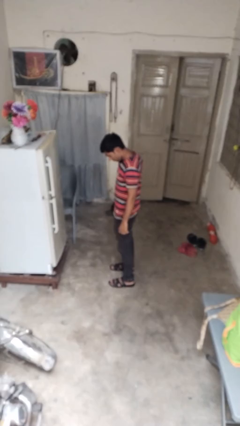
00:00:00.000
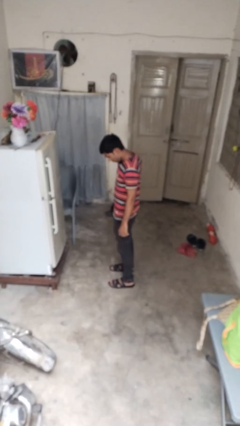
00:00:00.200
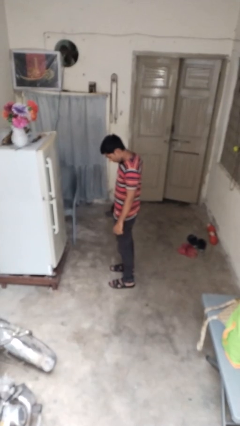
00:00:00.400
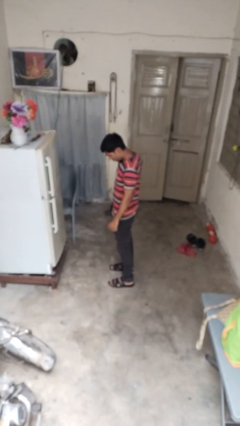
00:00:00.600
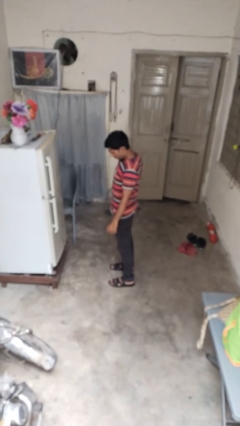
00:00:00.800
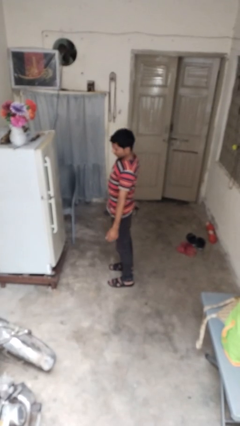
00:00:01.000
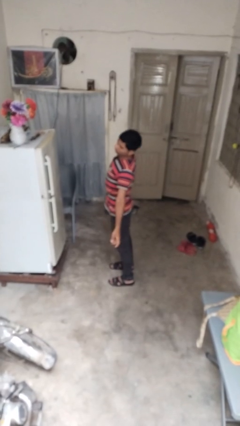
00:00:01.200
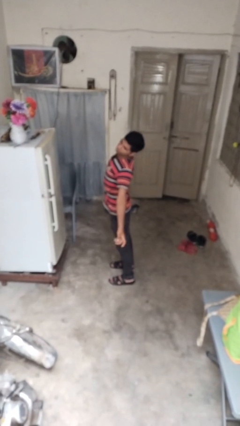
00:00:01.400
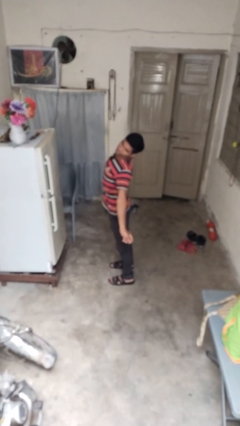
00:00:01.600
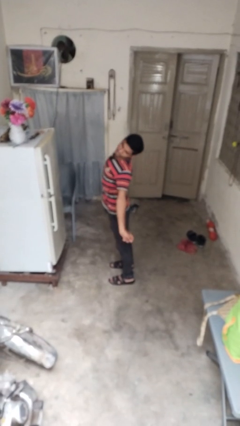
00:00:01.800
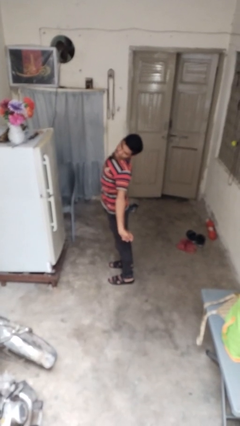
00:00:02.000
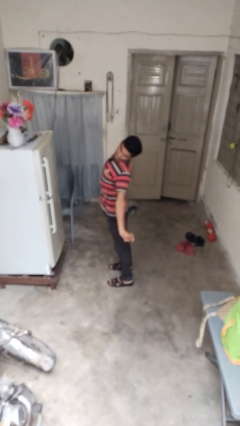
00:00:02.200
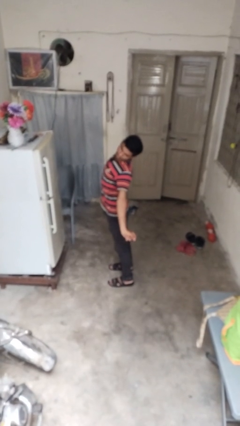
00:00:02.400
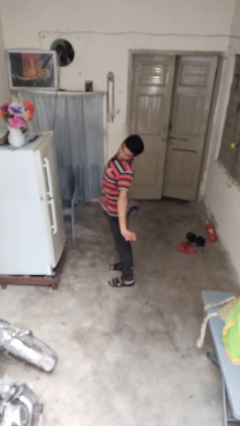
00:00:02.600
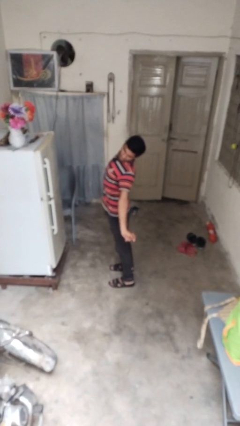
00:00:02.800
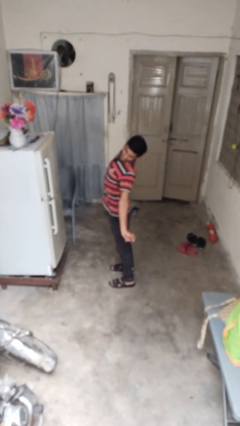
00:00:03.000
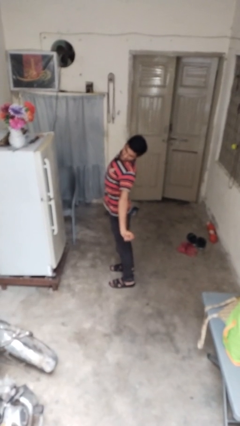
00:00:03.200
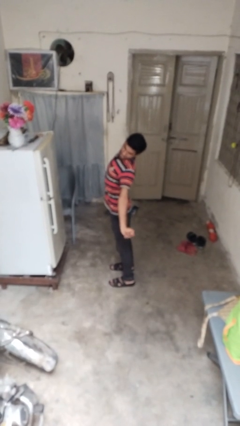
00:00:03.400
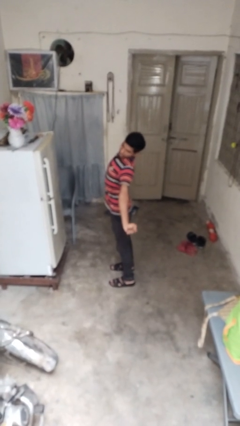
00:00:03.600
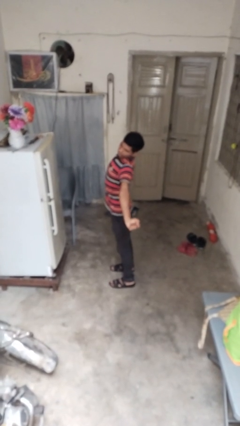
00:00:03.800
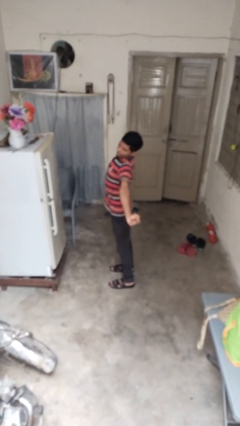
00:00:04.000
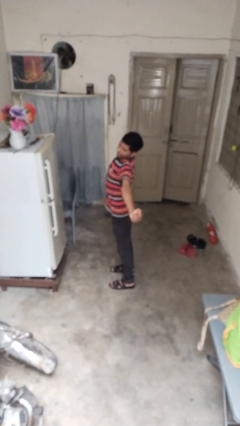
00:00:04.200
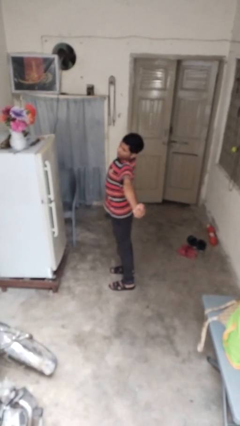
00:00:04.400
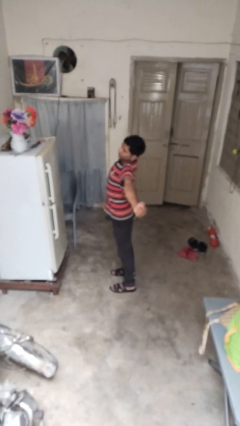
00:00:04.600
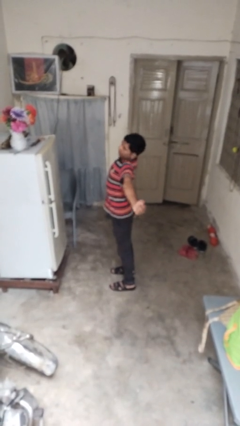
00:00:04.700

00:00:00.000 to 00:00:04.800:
person stretches back

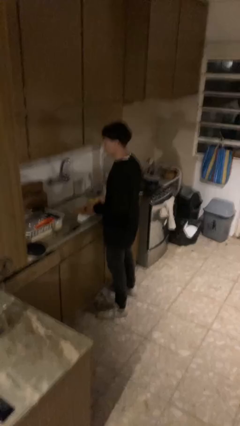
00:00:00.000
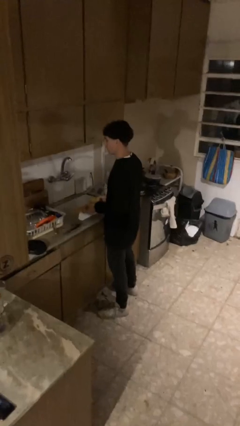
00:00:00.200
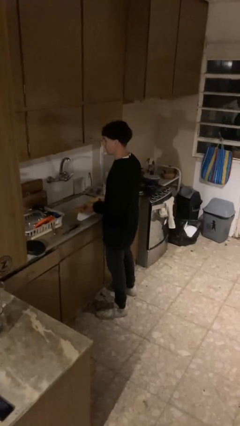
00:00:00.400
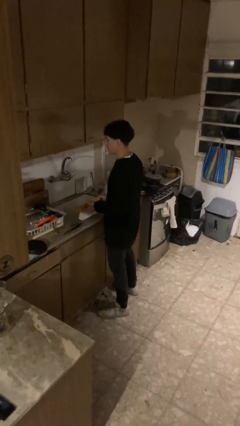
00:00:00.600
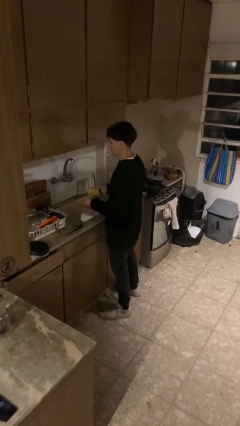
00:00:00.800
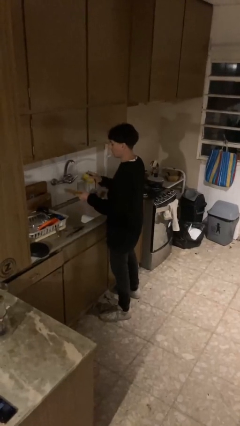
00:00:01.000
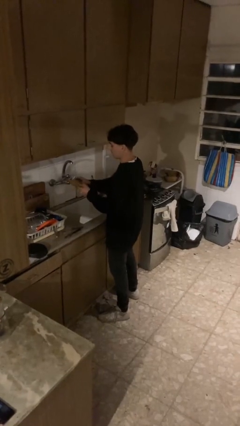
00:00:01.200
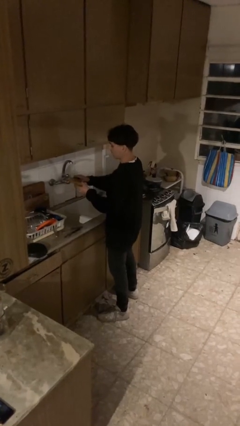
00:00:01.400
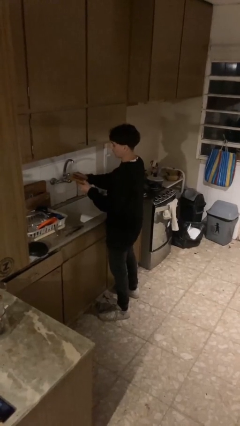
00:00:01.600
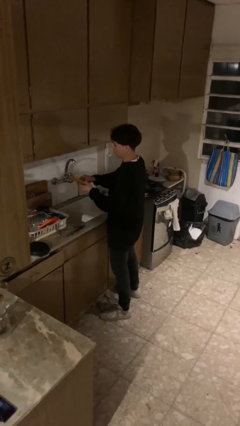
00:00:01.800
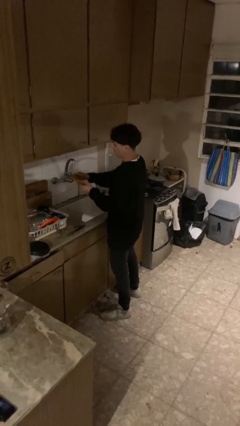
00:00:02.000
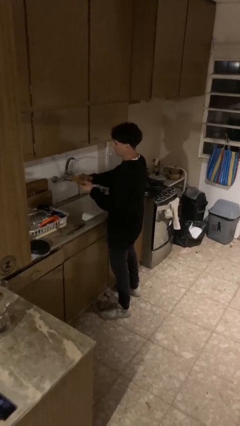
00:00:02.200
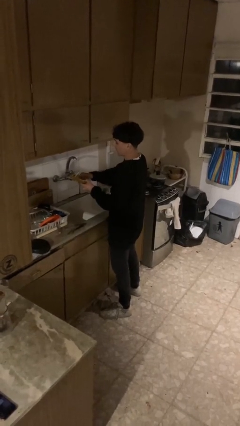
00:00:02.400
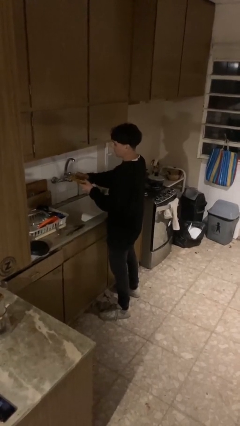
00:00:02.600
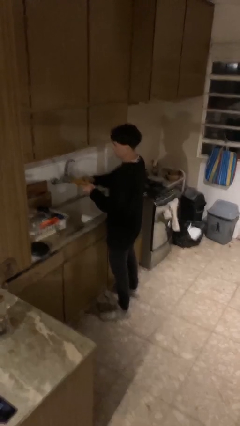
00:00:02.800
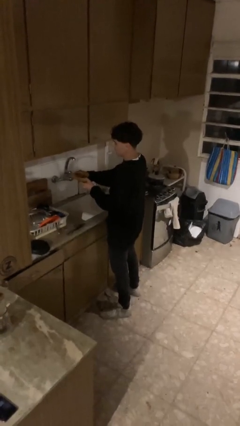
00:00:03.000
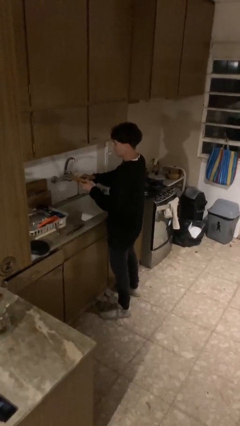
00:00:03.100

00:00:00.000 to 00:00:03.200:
person washes dish

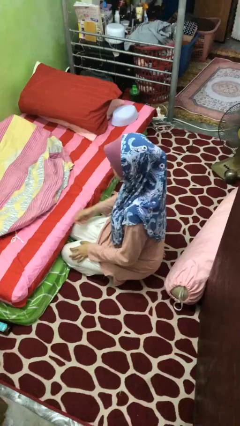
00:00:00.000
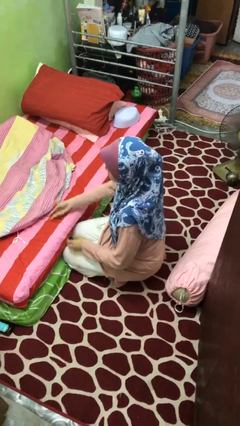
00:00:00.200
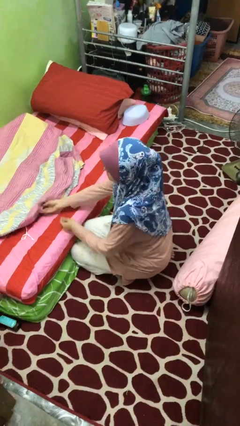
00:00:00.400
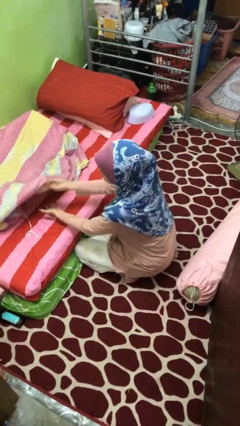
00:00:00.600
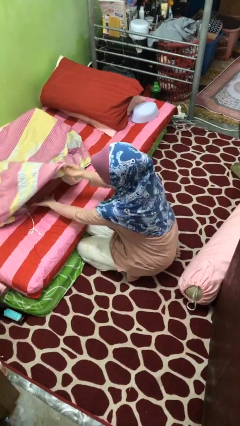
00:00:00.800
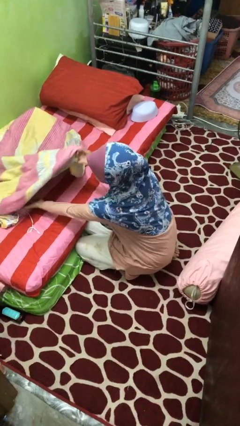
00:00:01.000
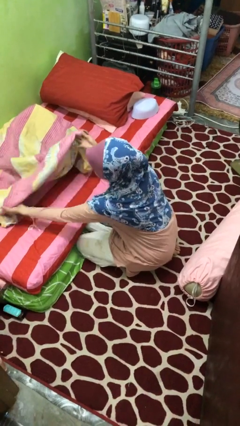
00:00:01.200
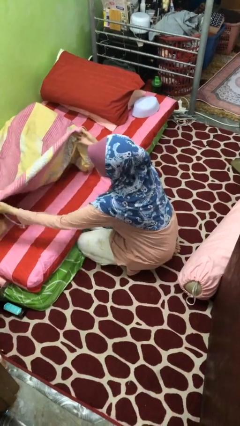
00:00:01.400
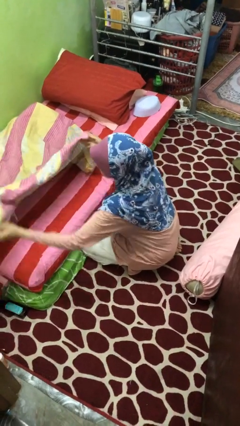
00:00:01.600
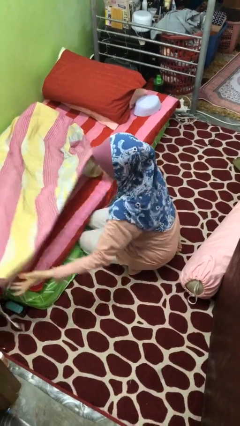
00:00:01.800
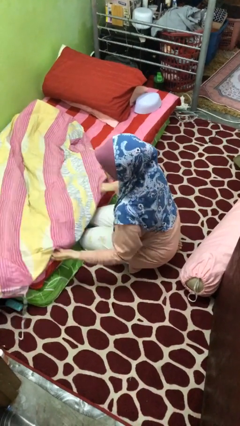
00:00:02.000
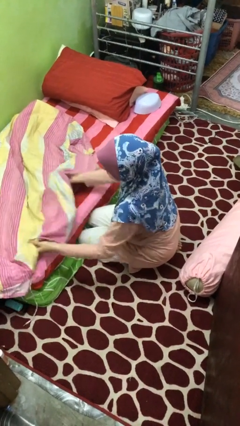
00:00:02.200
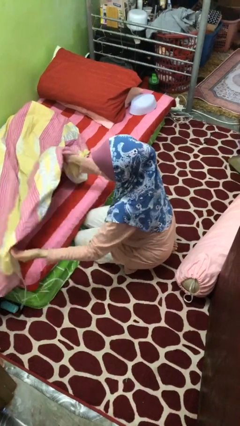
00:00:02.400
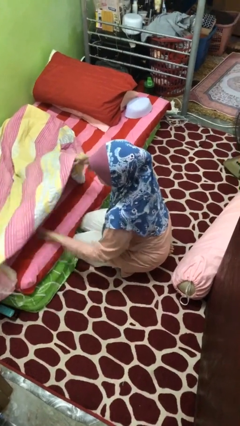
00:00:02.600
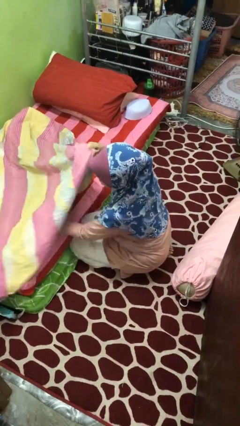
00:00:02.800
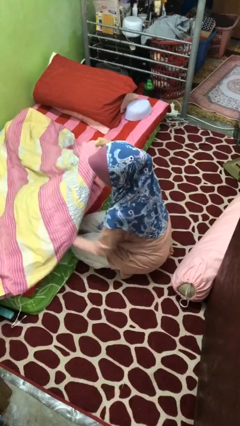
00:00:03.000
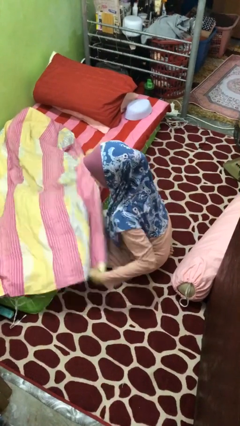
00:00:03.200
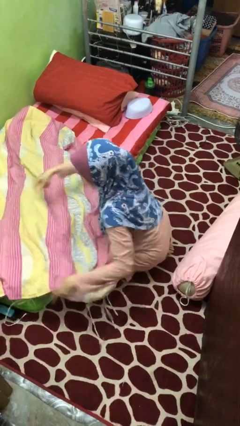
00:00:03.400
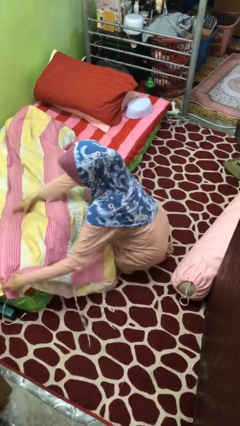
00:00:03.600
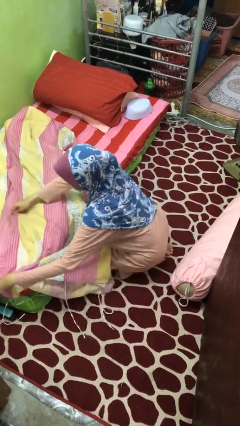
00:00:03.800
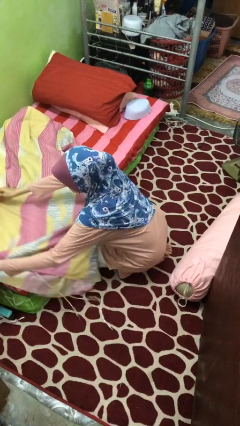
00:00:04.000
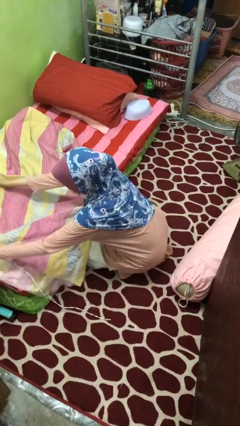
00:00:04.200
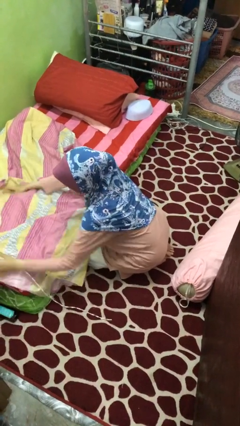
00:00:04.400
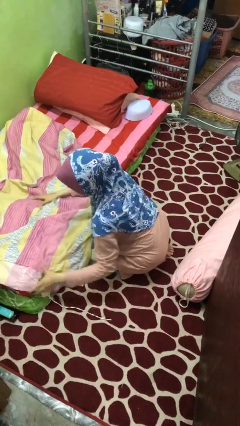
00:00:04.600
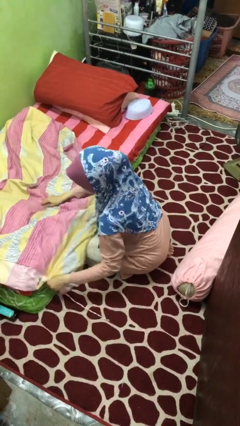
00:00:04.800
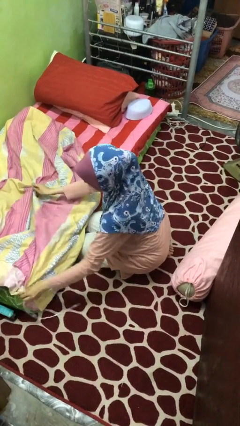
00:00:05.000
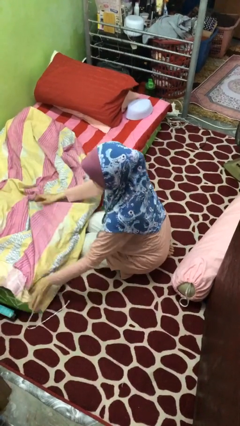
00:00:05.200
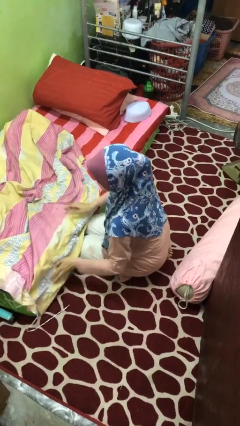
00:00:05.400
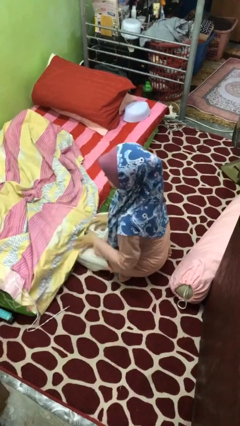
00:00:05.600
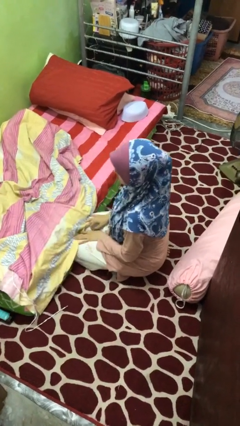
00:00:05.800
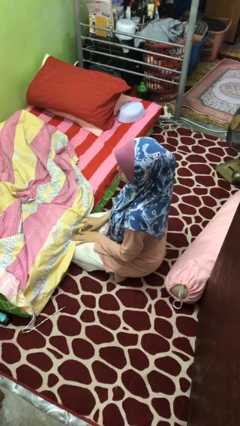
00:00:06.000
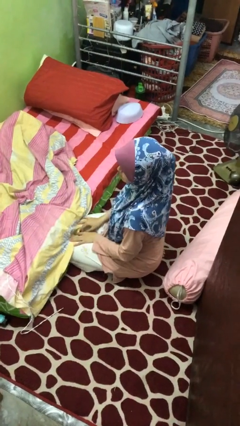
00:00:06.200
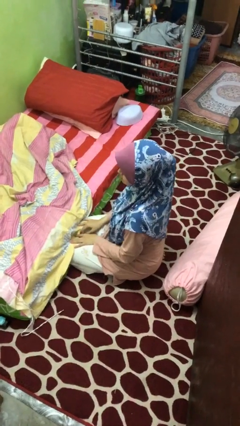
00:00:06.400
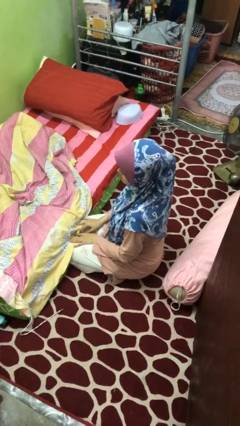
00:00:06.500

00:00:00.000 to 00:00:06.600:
person makes bed

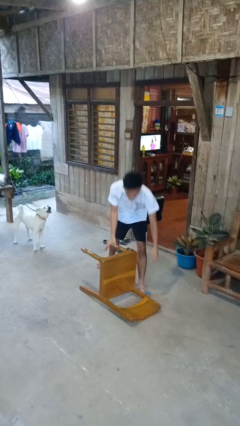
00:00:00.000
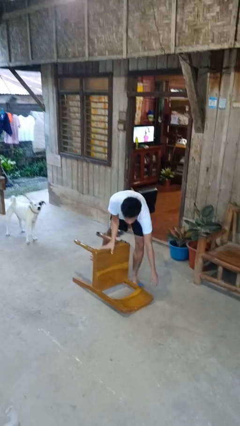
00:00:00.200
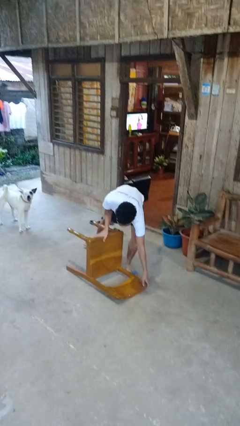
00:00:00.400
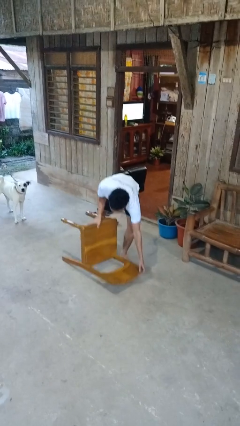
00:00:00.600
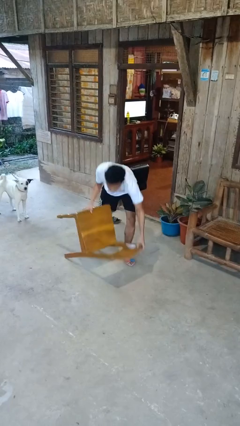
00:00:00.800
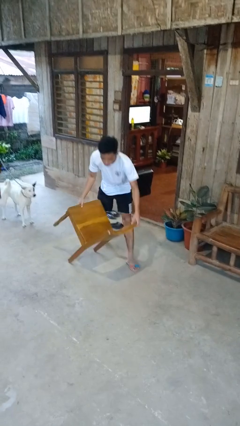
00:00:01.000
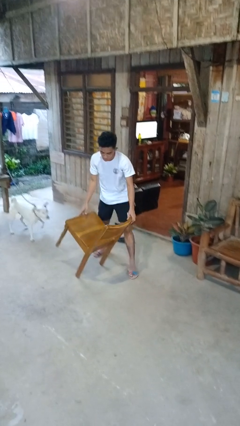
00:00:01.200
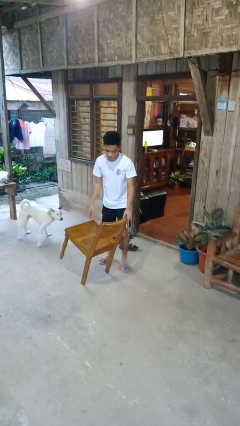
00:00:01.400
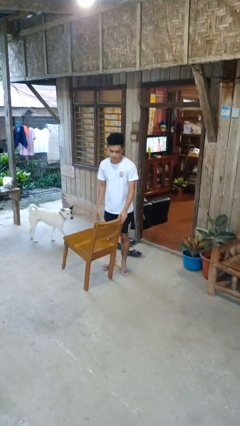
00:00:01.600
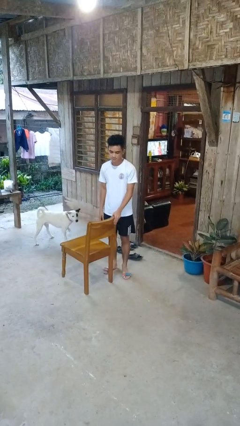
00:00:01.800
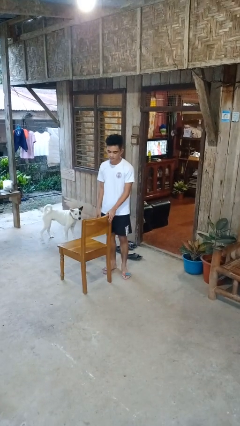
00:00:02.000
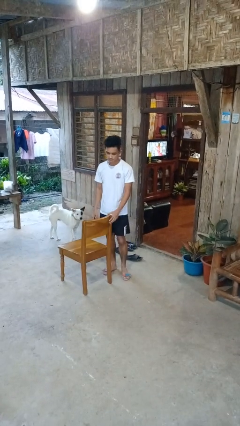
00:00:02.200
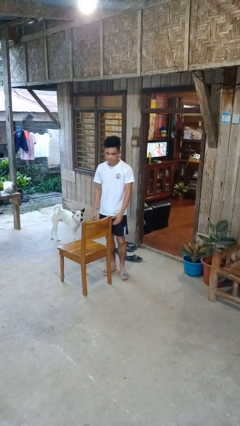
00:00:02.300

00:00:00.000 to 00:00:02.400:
person sets upright glass

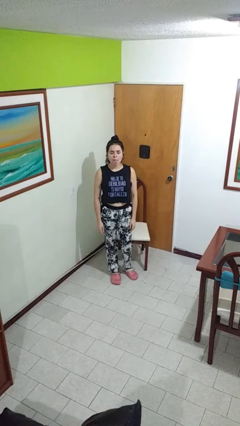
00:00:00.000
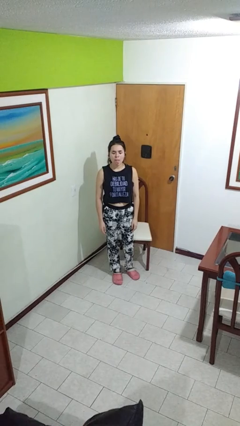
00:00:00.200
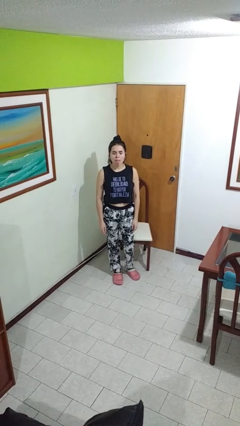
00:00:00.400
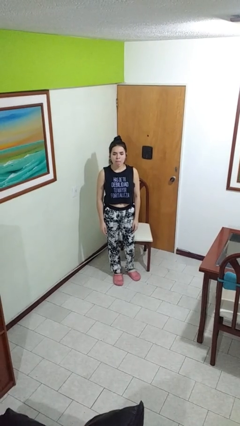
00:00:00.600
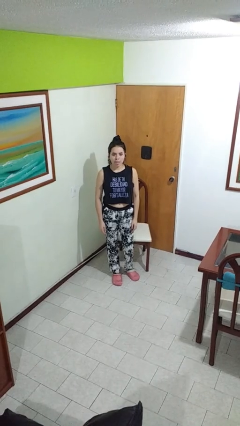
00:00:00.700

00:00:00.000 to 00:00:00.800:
person sticks out tongue

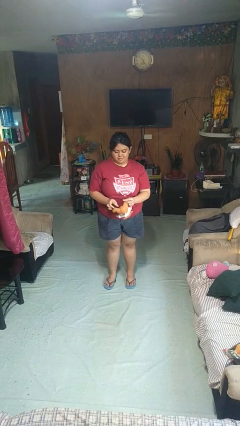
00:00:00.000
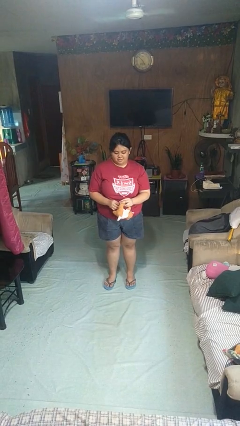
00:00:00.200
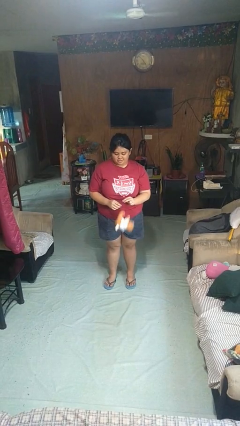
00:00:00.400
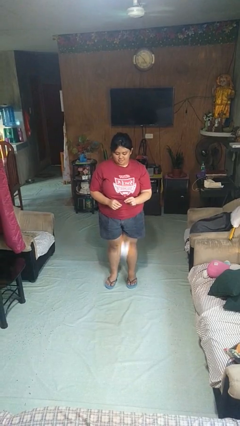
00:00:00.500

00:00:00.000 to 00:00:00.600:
person drops object
